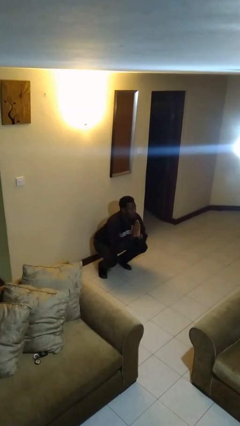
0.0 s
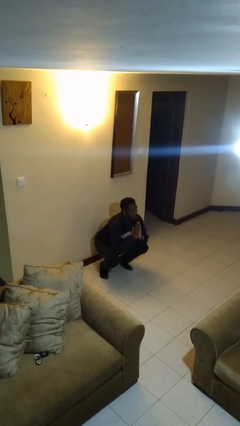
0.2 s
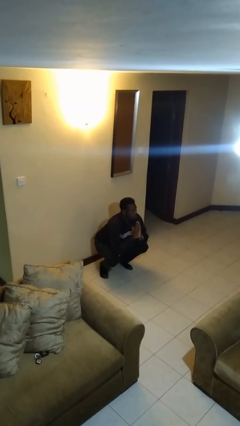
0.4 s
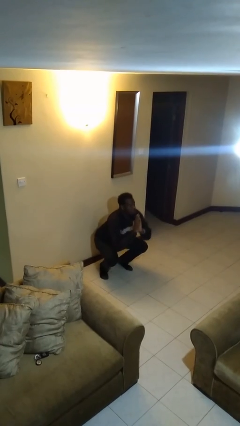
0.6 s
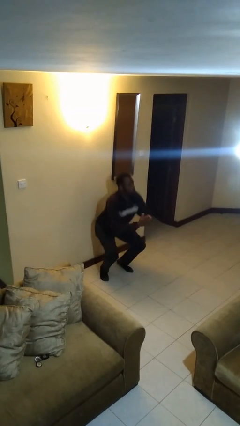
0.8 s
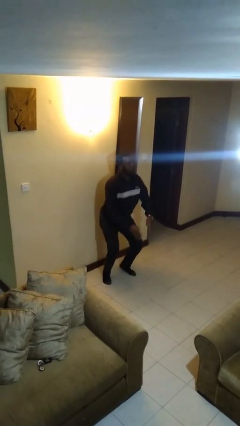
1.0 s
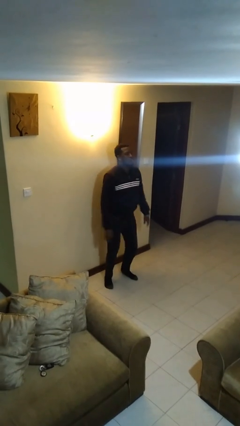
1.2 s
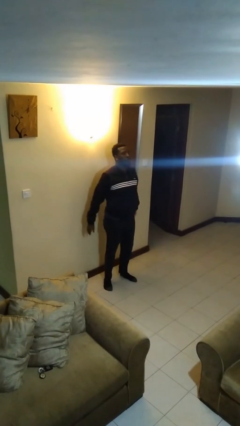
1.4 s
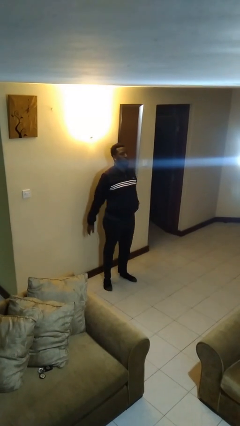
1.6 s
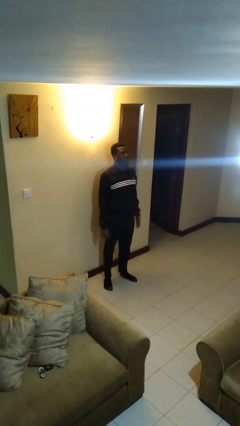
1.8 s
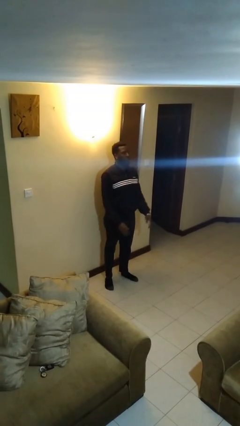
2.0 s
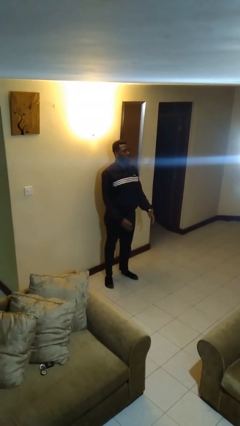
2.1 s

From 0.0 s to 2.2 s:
person stands up

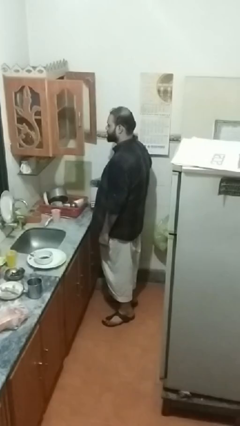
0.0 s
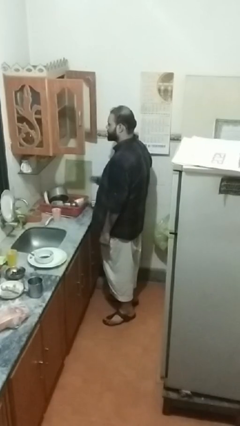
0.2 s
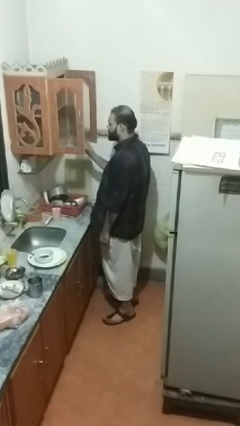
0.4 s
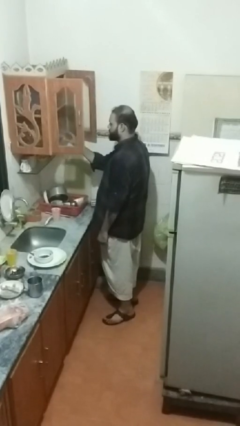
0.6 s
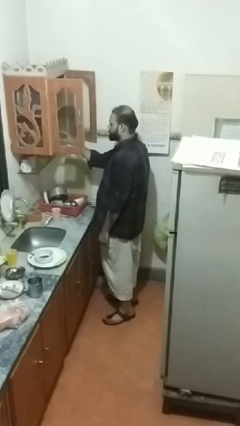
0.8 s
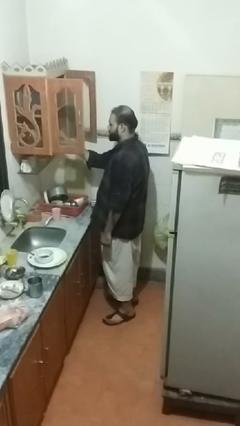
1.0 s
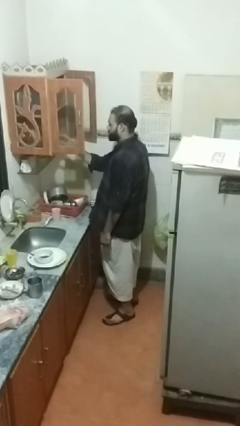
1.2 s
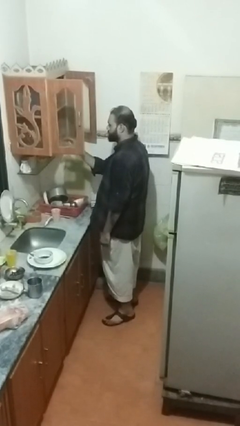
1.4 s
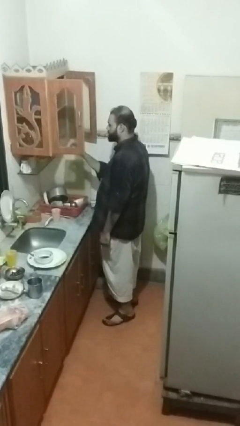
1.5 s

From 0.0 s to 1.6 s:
person puts object in cabinet

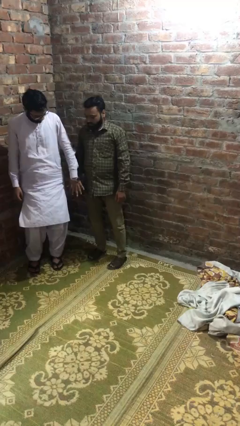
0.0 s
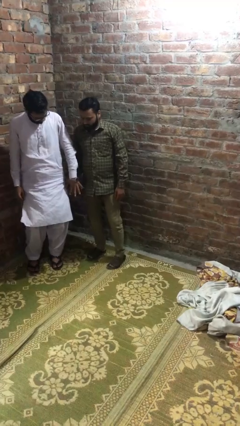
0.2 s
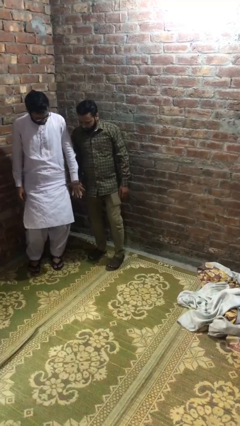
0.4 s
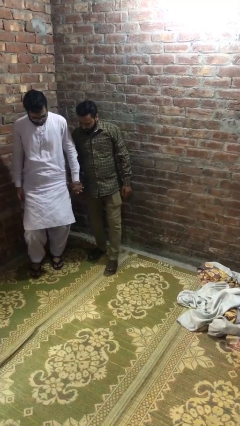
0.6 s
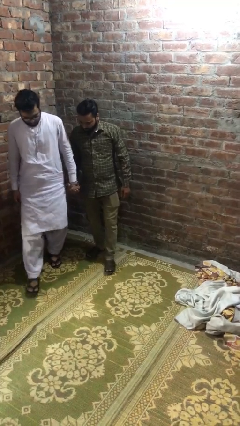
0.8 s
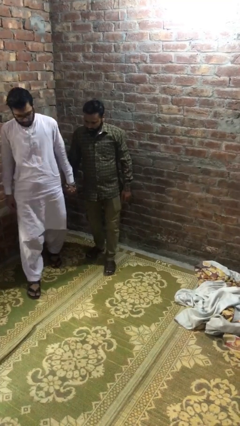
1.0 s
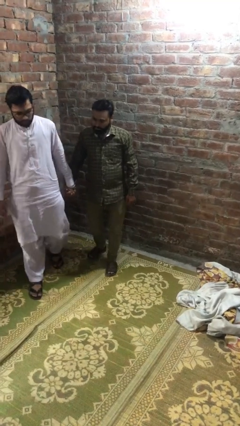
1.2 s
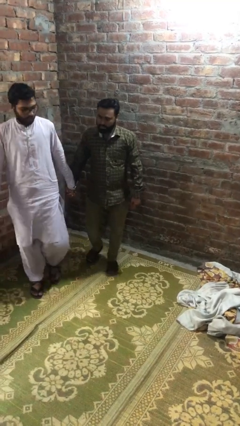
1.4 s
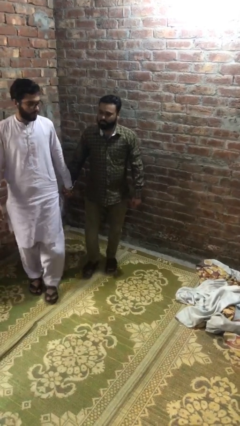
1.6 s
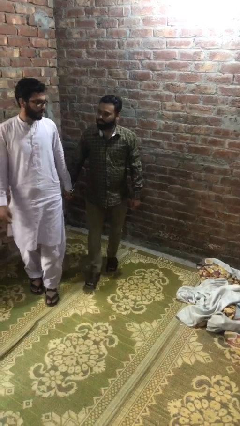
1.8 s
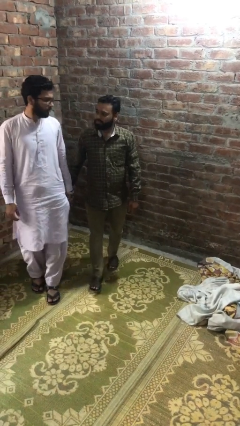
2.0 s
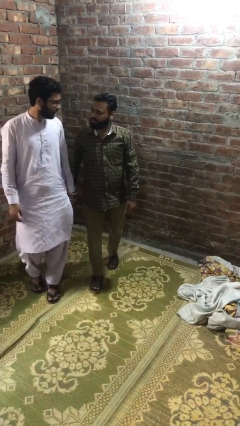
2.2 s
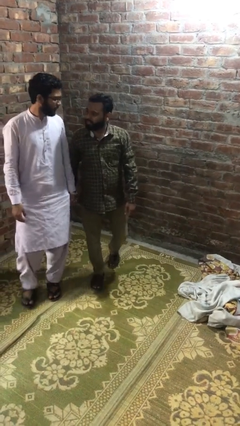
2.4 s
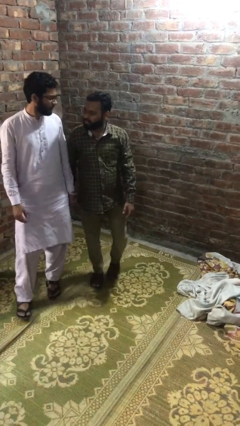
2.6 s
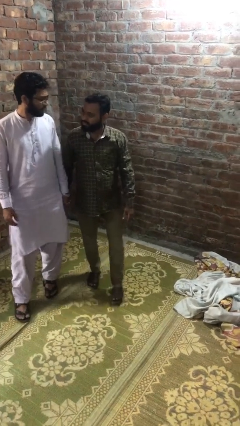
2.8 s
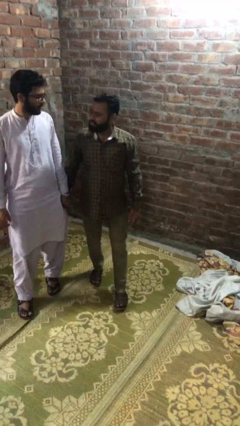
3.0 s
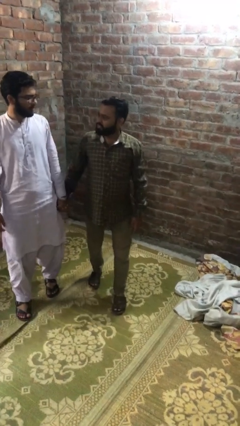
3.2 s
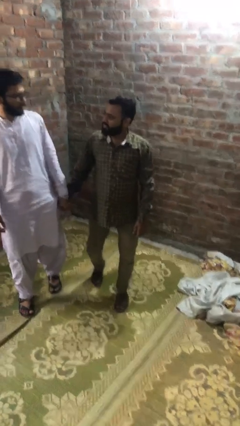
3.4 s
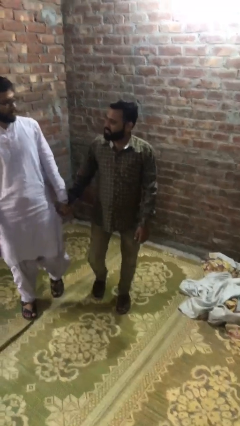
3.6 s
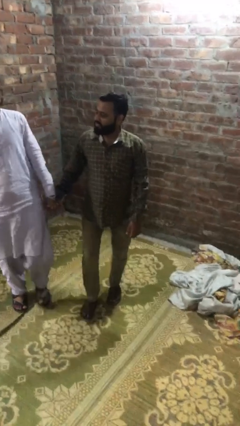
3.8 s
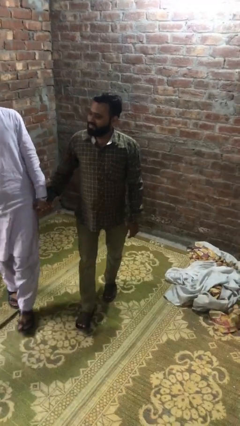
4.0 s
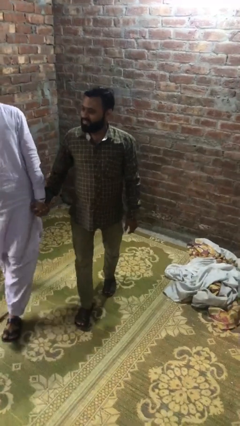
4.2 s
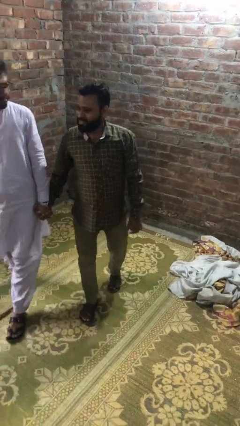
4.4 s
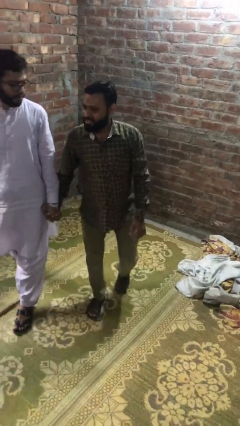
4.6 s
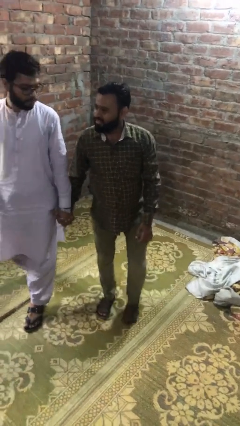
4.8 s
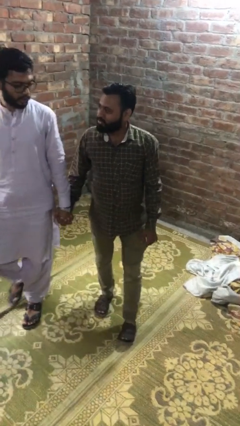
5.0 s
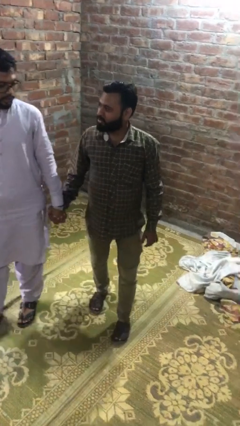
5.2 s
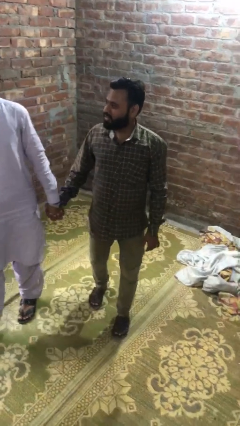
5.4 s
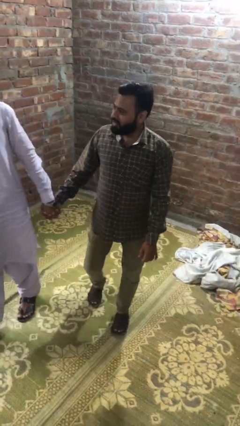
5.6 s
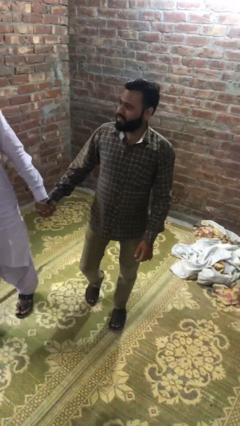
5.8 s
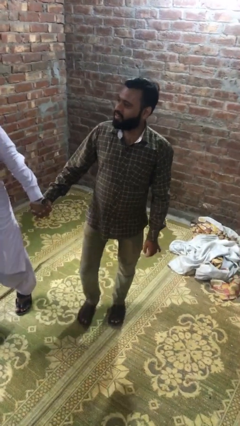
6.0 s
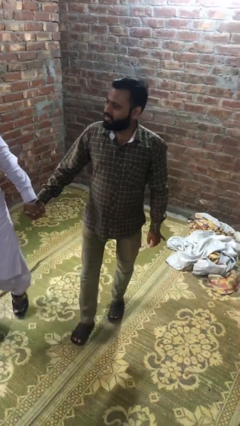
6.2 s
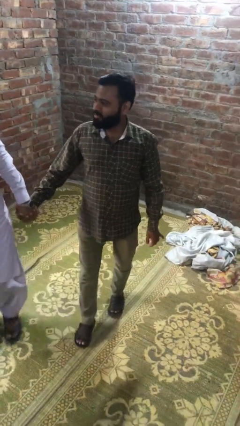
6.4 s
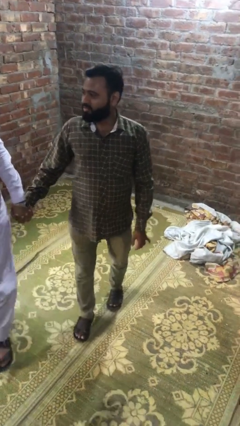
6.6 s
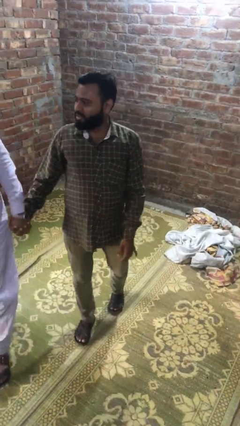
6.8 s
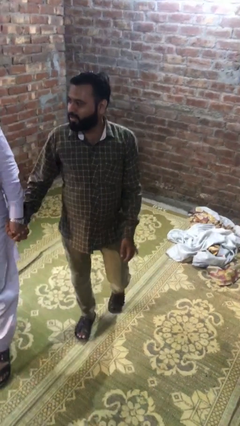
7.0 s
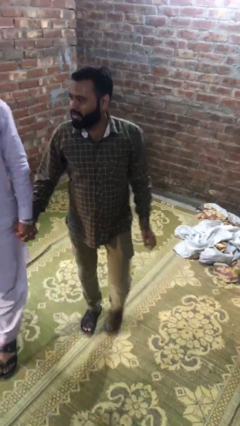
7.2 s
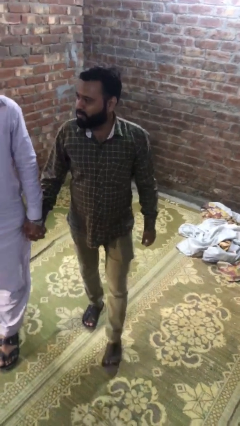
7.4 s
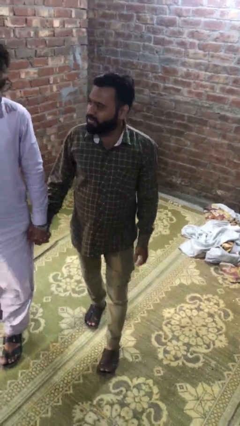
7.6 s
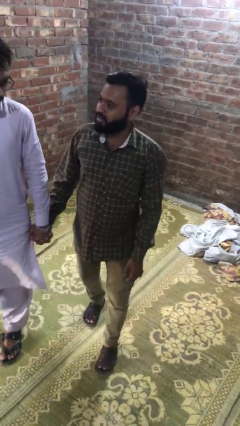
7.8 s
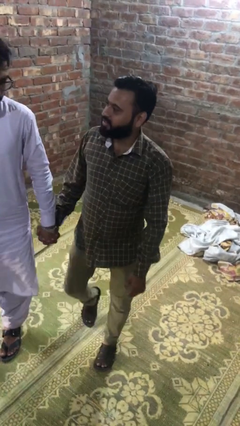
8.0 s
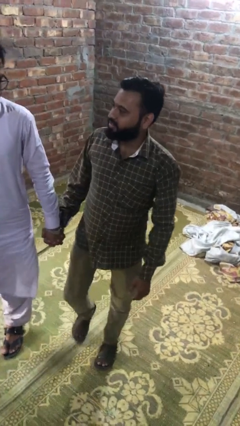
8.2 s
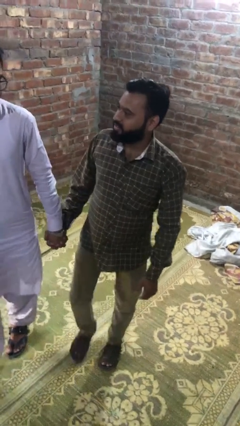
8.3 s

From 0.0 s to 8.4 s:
person holds hand

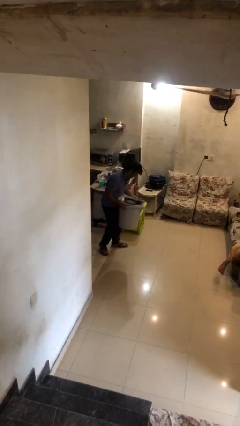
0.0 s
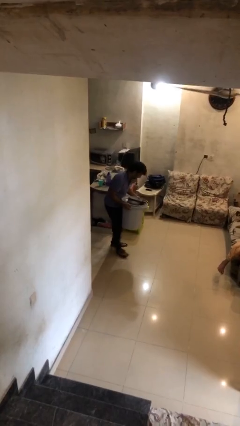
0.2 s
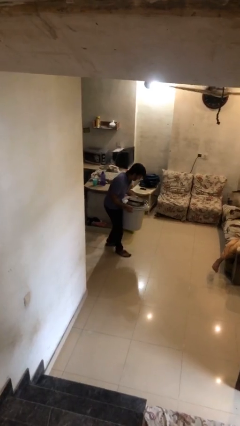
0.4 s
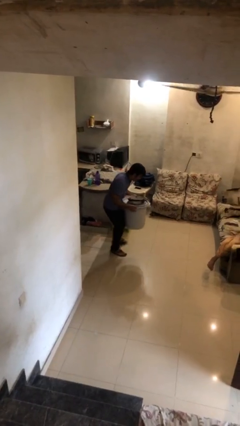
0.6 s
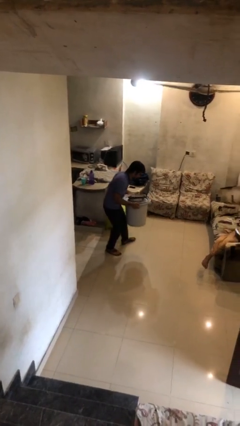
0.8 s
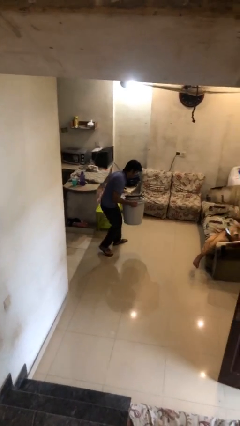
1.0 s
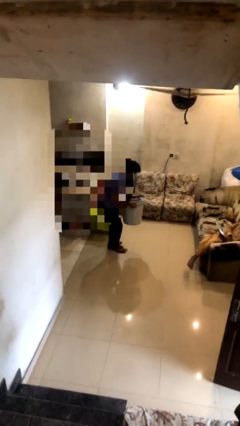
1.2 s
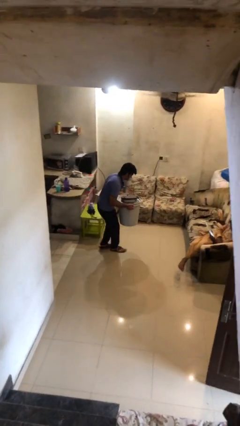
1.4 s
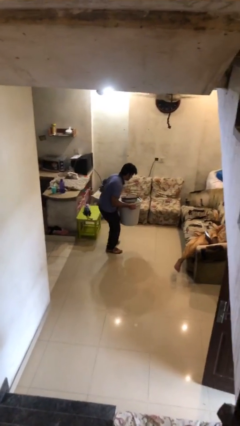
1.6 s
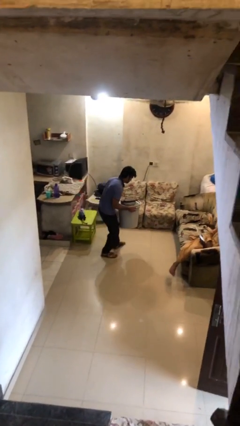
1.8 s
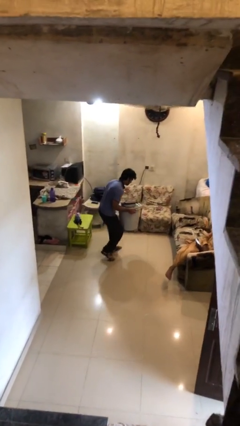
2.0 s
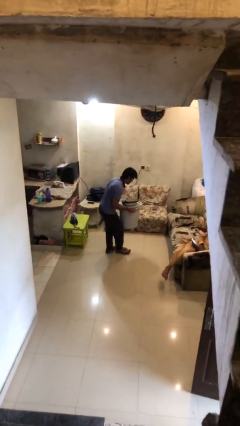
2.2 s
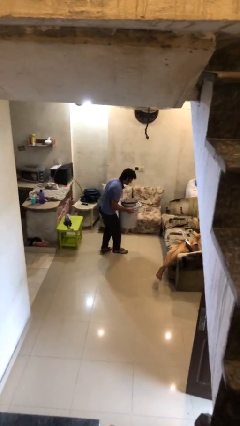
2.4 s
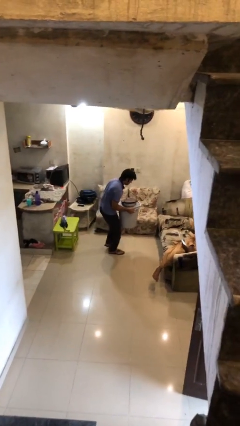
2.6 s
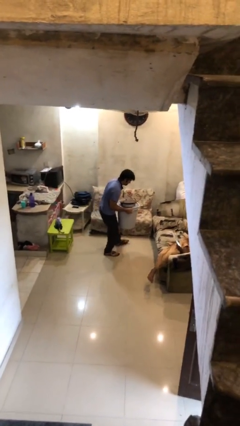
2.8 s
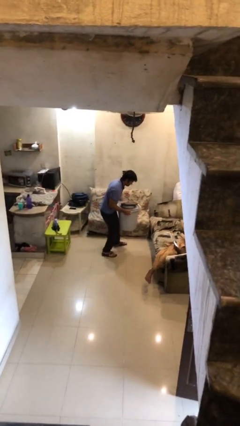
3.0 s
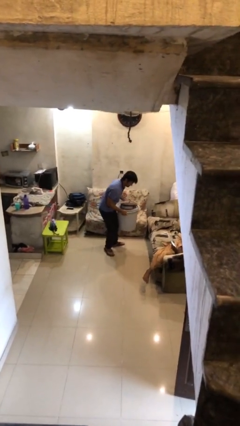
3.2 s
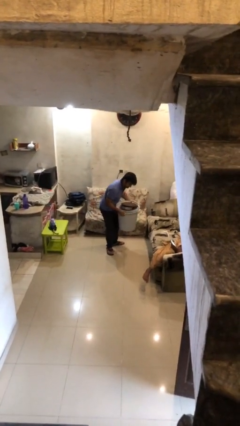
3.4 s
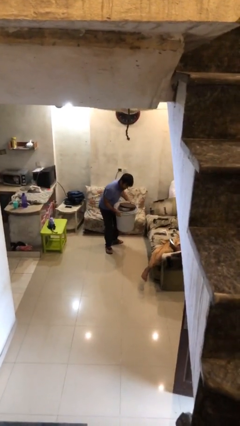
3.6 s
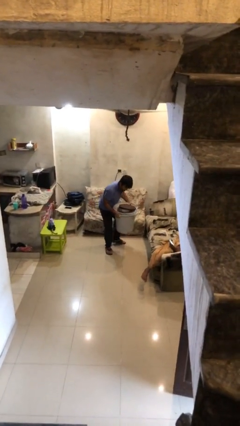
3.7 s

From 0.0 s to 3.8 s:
person carries heavy object

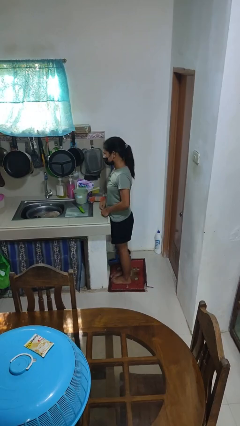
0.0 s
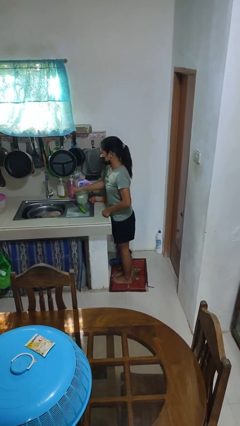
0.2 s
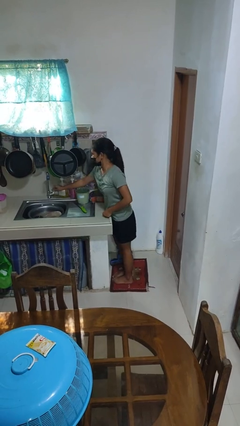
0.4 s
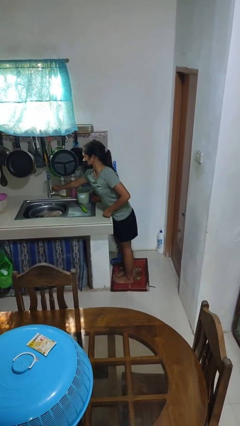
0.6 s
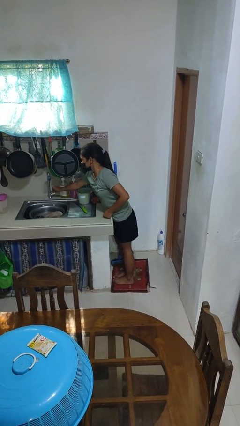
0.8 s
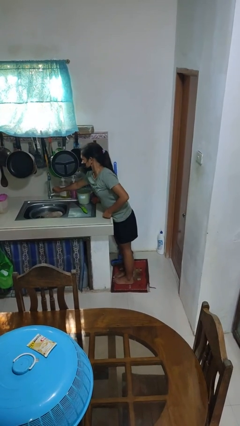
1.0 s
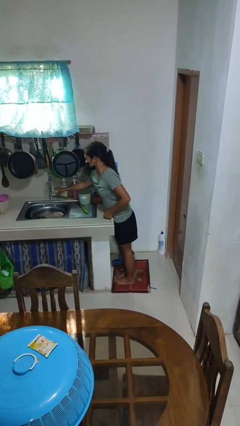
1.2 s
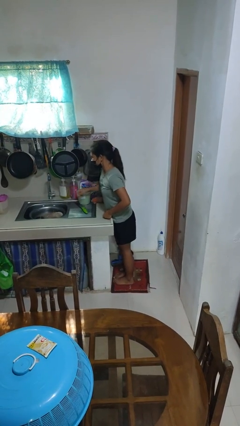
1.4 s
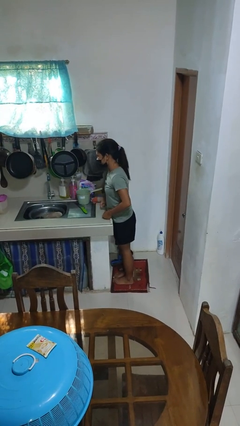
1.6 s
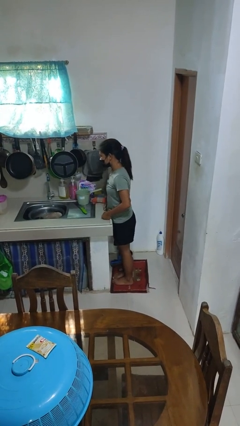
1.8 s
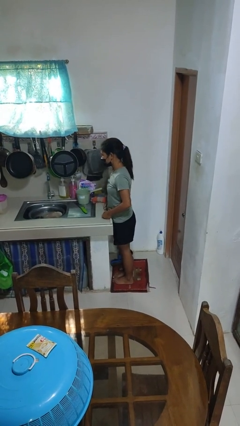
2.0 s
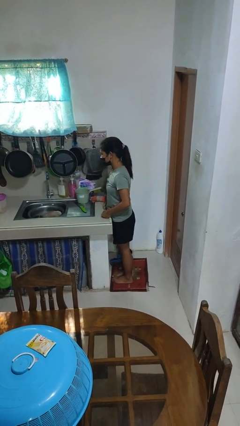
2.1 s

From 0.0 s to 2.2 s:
person turns on faucet
